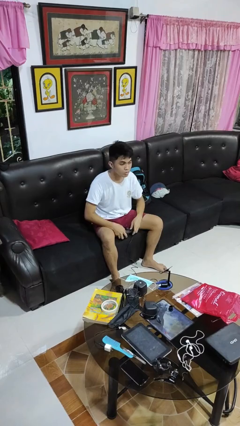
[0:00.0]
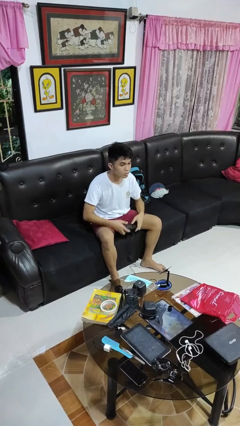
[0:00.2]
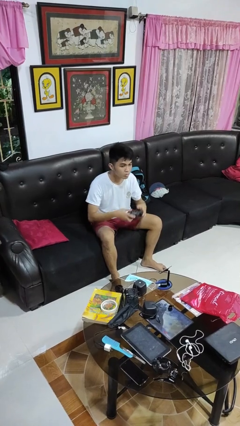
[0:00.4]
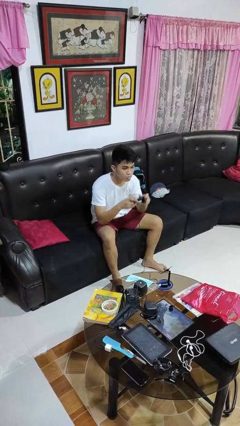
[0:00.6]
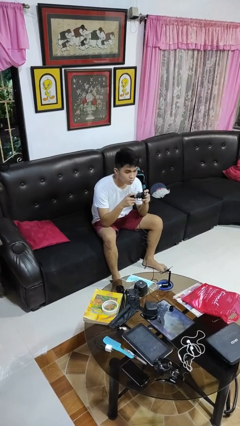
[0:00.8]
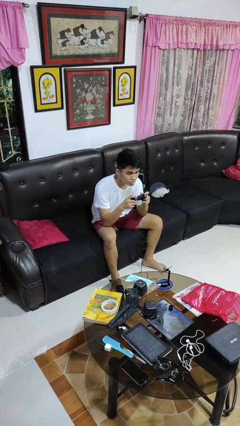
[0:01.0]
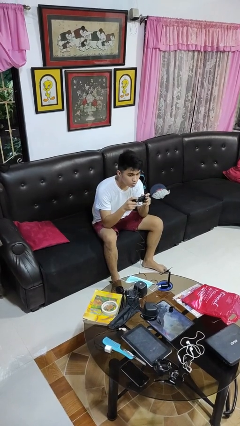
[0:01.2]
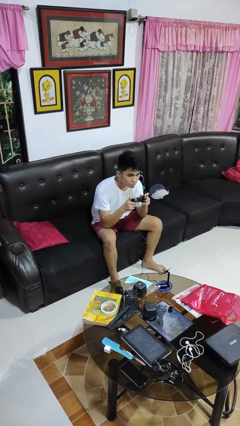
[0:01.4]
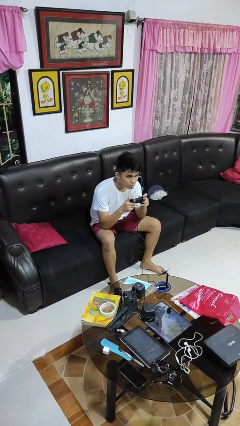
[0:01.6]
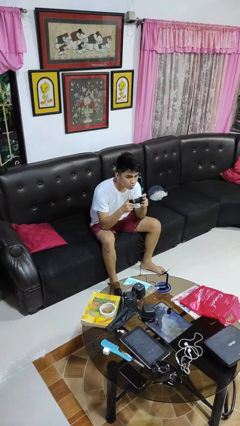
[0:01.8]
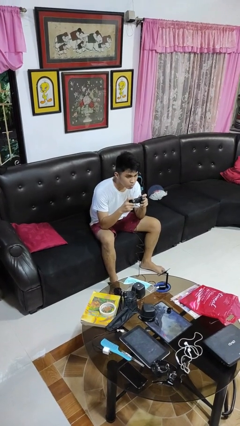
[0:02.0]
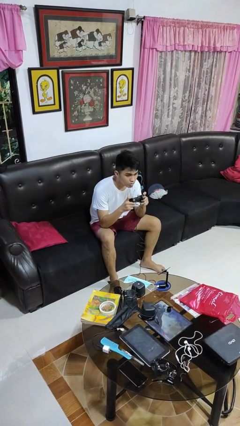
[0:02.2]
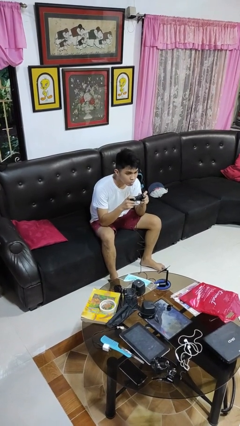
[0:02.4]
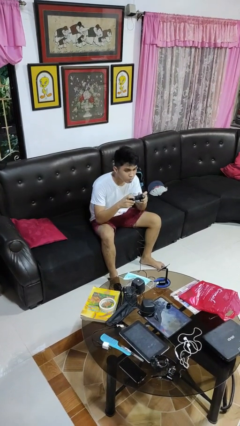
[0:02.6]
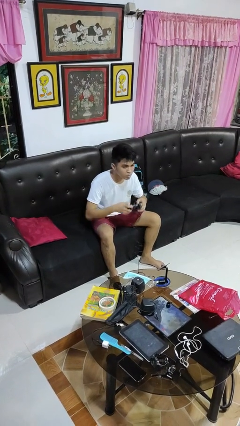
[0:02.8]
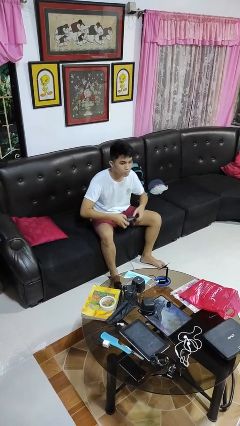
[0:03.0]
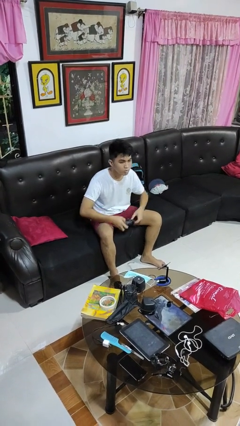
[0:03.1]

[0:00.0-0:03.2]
person interacts with handheld game

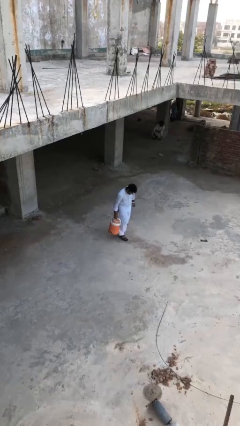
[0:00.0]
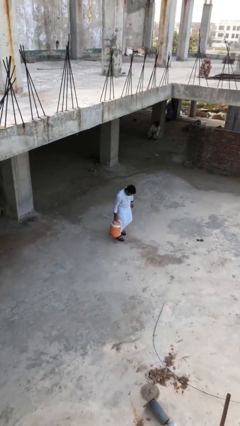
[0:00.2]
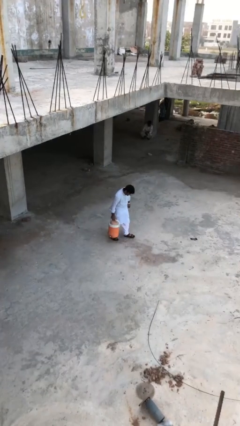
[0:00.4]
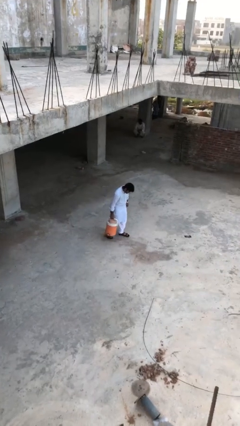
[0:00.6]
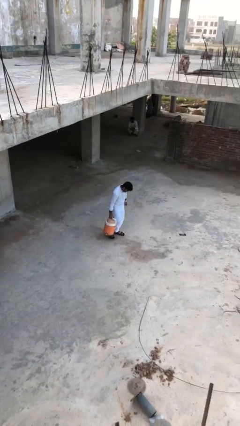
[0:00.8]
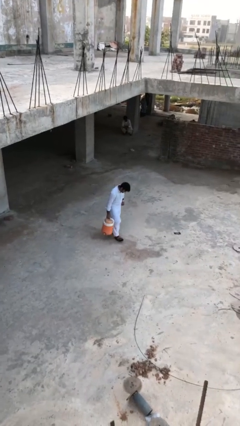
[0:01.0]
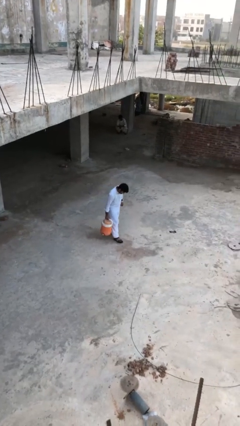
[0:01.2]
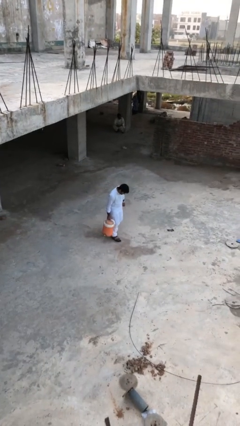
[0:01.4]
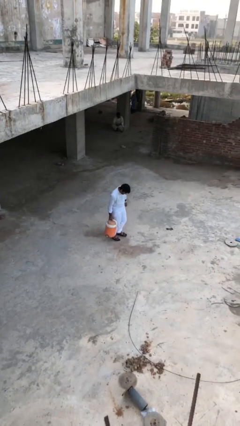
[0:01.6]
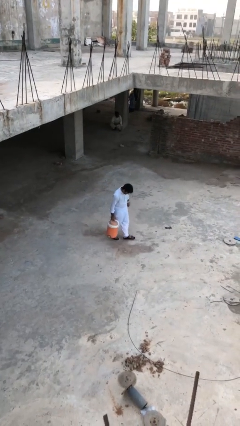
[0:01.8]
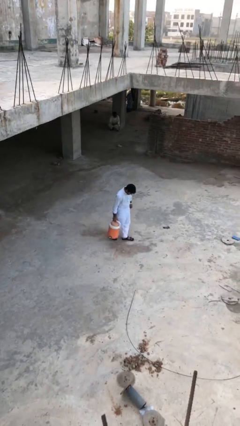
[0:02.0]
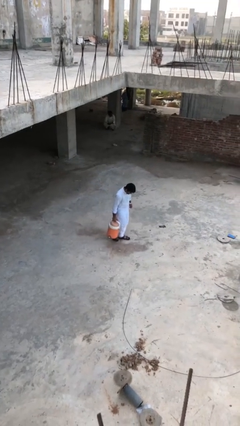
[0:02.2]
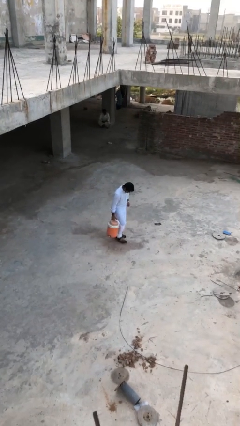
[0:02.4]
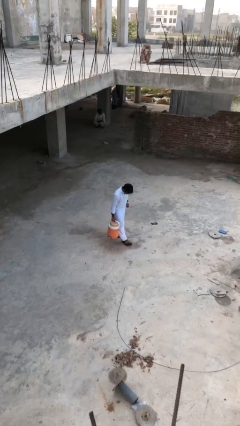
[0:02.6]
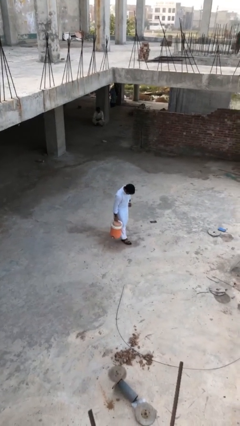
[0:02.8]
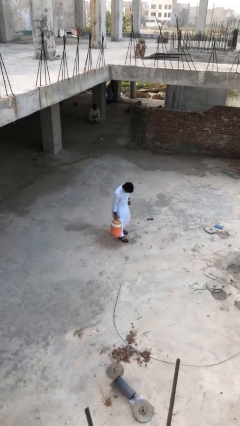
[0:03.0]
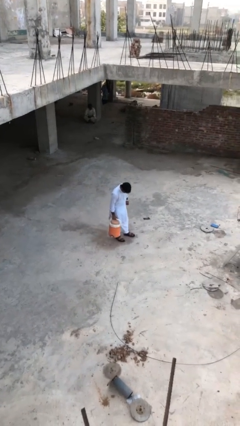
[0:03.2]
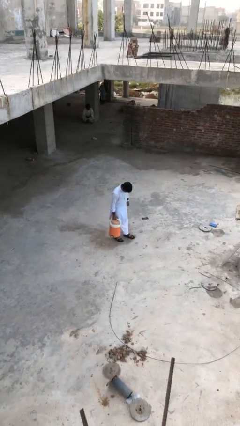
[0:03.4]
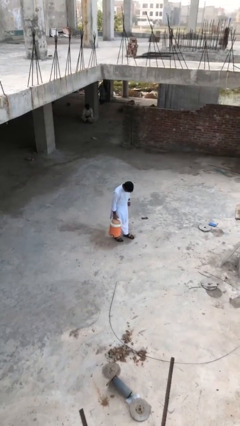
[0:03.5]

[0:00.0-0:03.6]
person carries heavy object

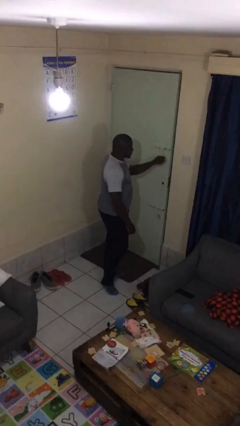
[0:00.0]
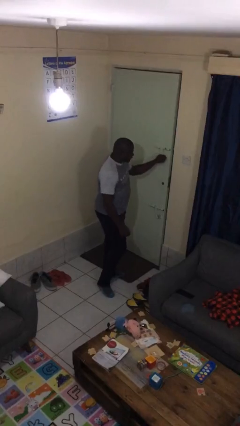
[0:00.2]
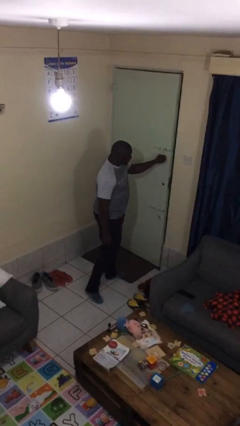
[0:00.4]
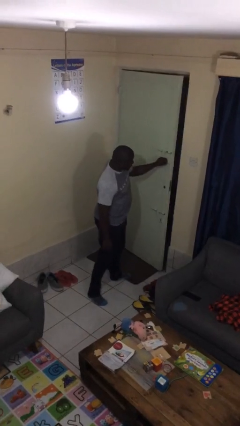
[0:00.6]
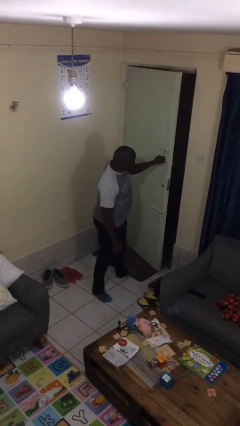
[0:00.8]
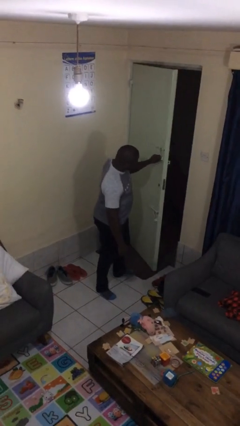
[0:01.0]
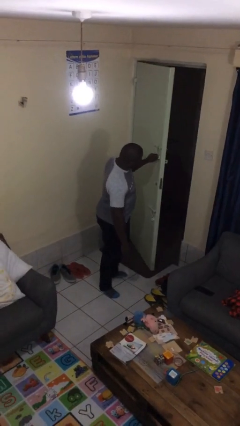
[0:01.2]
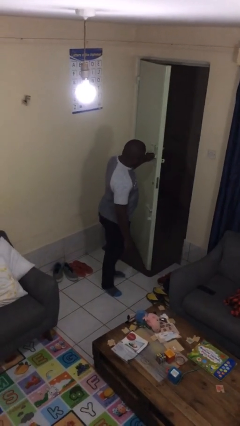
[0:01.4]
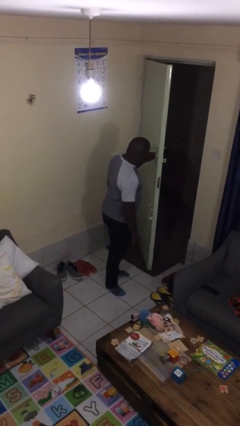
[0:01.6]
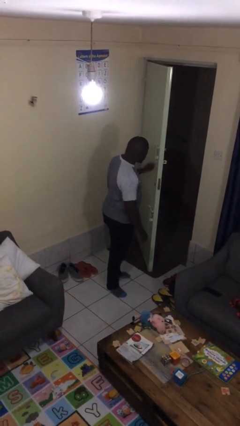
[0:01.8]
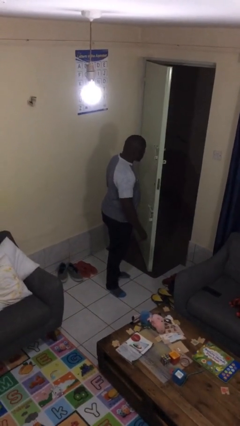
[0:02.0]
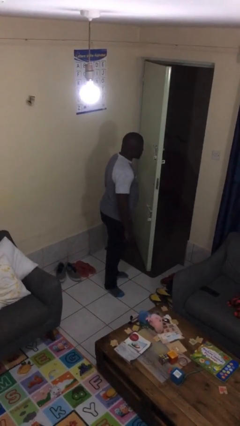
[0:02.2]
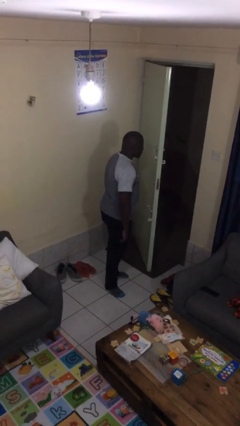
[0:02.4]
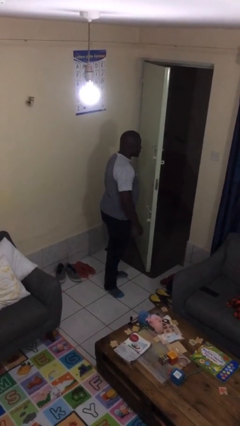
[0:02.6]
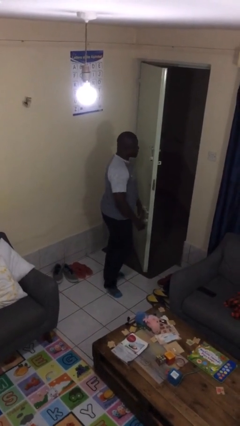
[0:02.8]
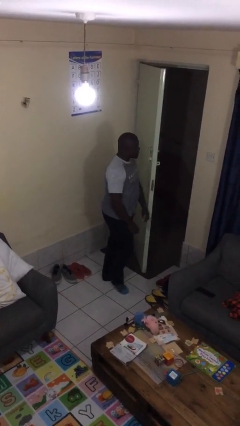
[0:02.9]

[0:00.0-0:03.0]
person opens facility door

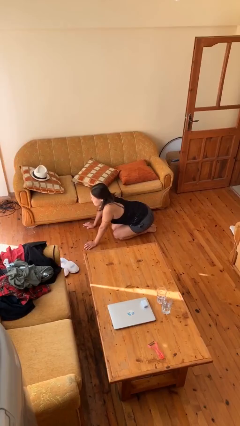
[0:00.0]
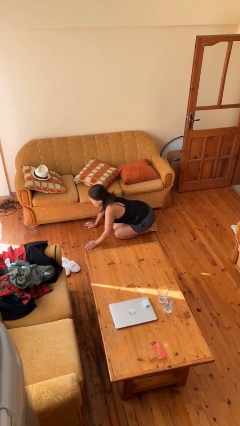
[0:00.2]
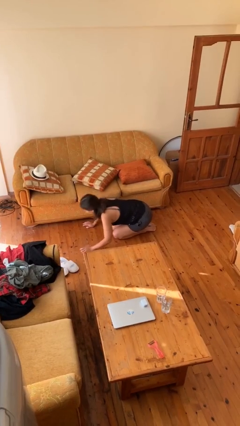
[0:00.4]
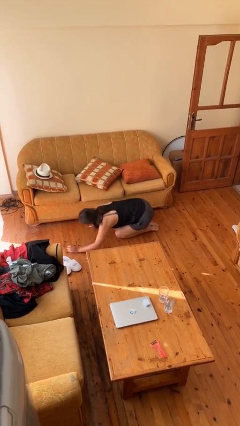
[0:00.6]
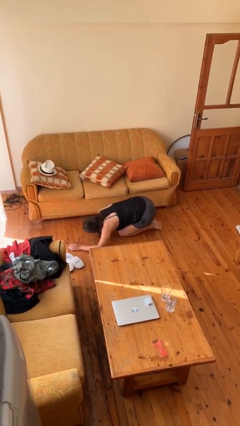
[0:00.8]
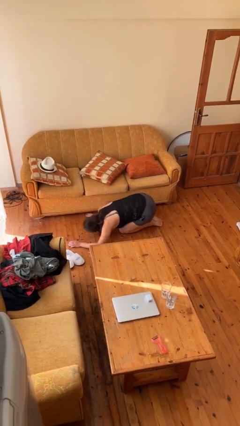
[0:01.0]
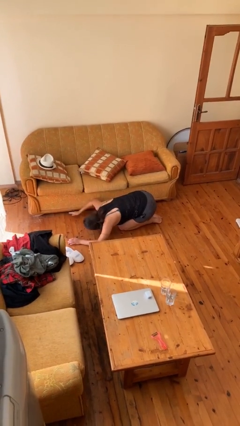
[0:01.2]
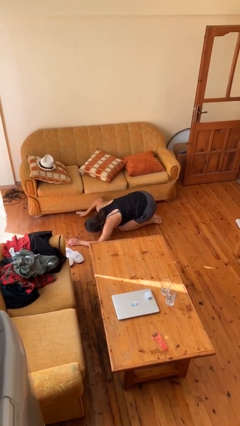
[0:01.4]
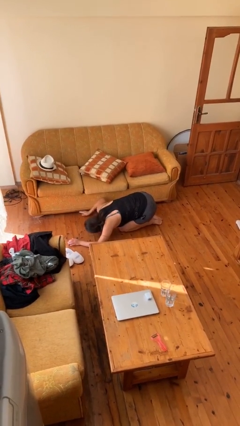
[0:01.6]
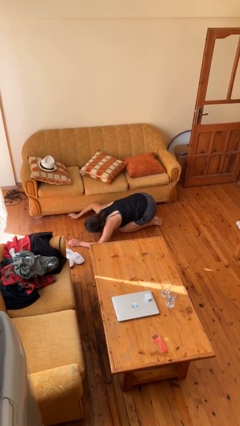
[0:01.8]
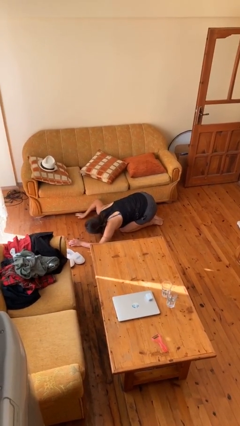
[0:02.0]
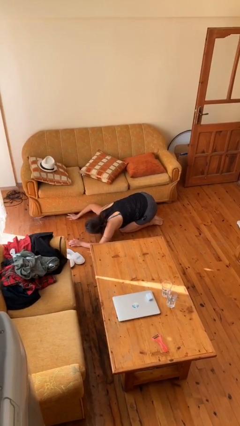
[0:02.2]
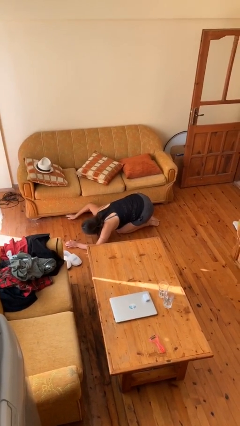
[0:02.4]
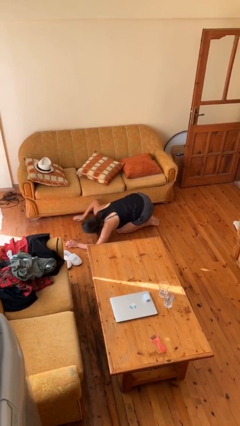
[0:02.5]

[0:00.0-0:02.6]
person searches under couch

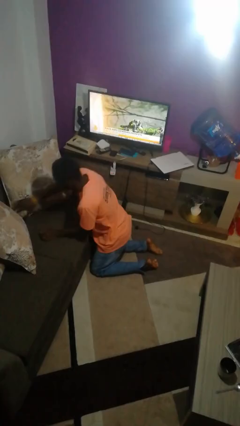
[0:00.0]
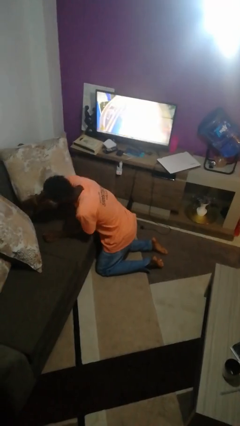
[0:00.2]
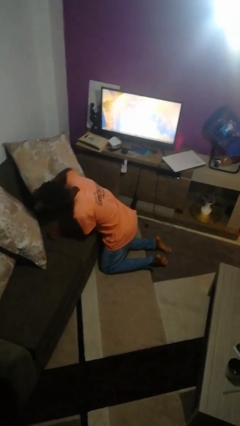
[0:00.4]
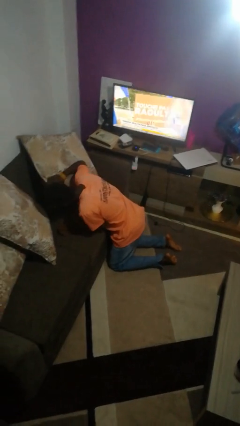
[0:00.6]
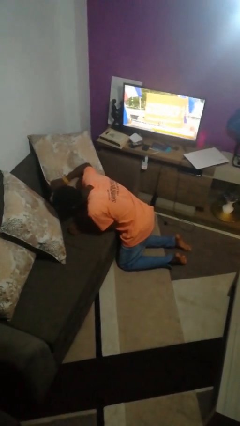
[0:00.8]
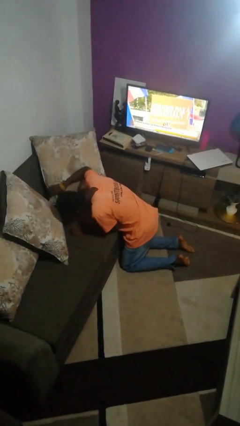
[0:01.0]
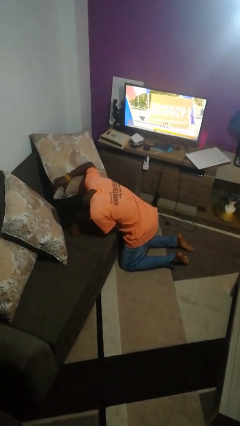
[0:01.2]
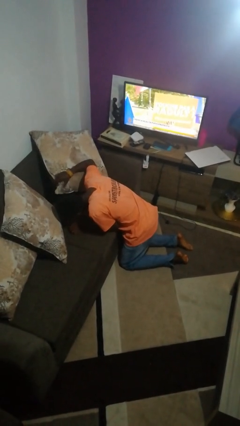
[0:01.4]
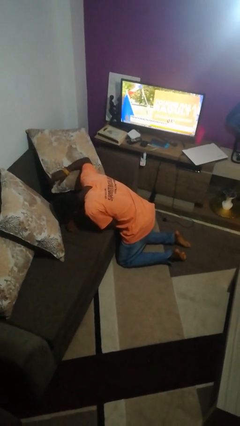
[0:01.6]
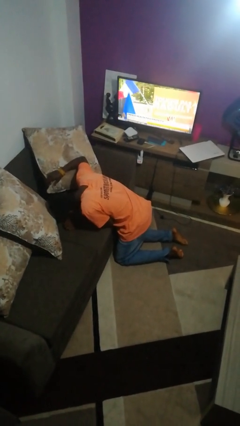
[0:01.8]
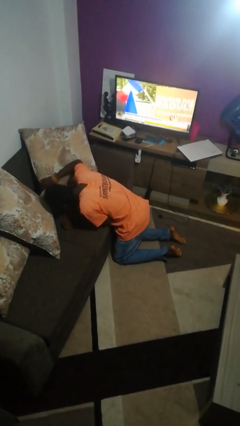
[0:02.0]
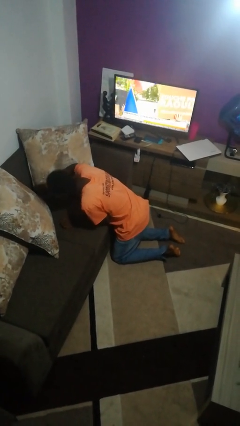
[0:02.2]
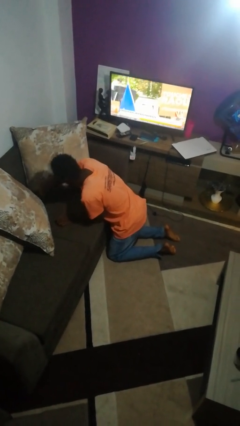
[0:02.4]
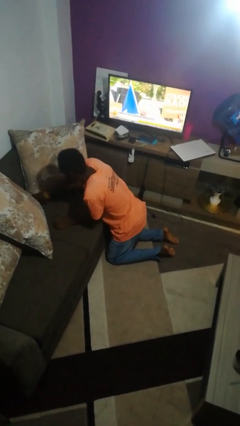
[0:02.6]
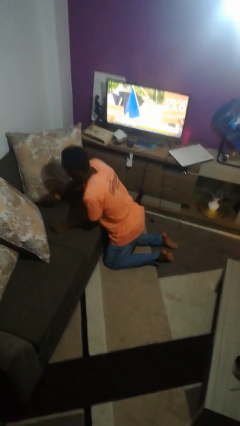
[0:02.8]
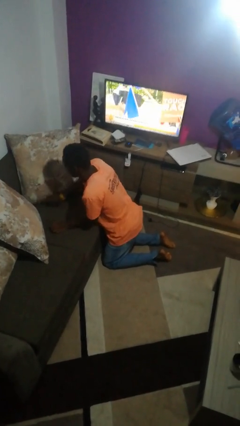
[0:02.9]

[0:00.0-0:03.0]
person searches in couch

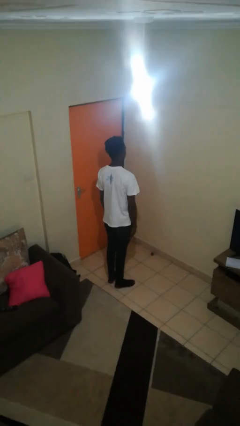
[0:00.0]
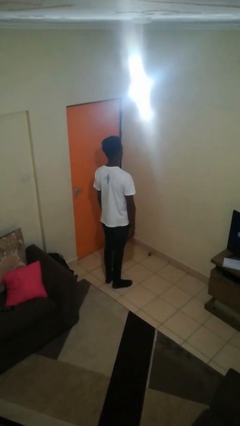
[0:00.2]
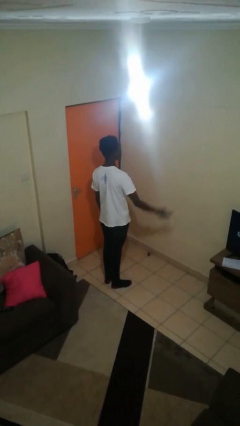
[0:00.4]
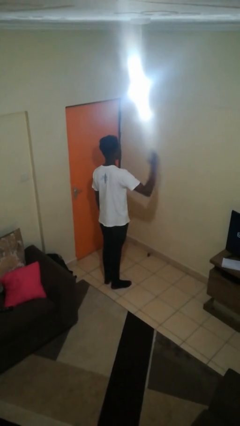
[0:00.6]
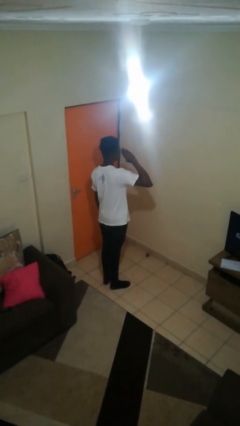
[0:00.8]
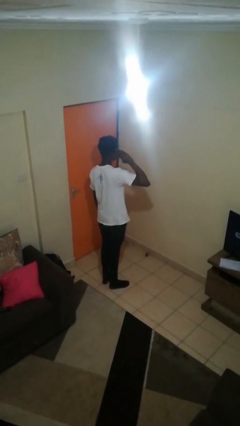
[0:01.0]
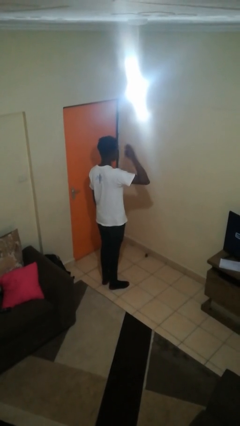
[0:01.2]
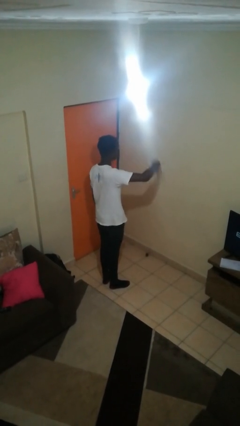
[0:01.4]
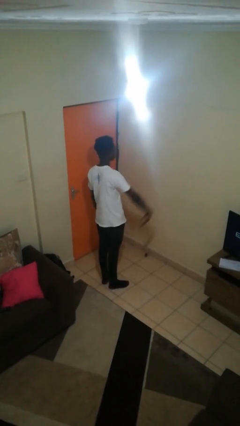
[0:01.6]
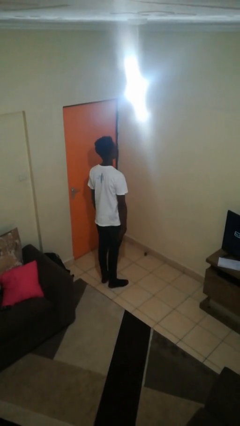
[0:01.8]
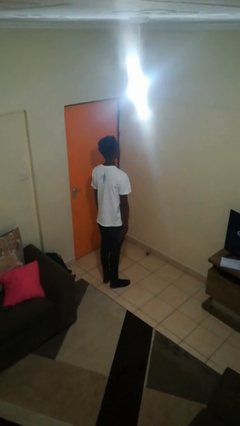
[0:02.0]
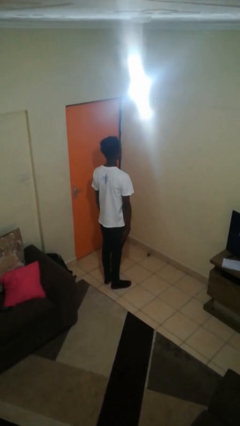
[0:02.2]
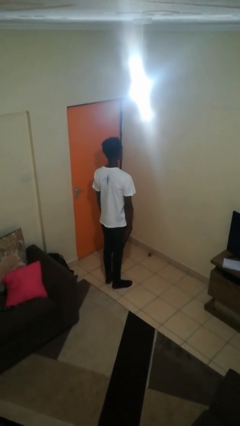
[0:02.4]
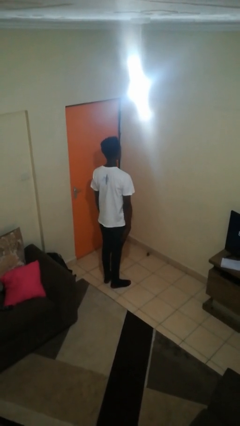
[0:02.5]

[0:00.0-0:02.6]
person salutes
